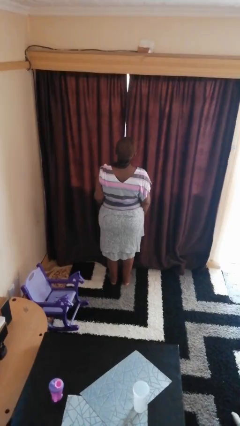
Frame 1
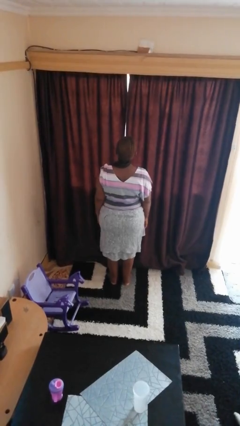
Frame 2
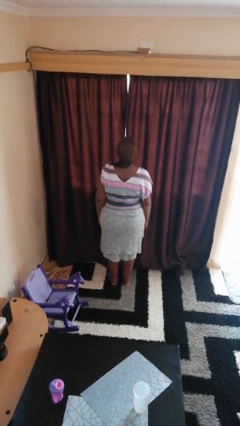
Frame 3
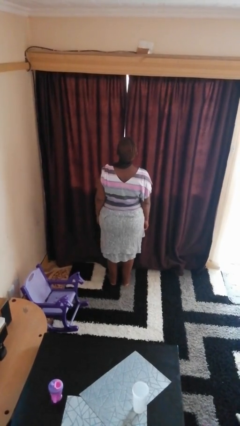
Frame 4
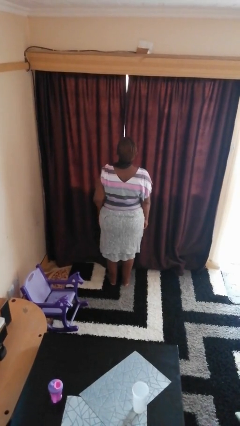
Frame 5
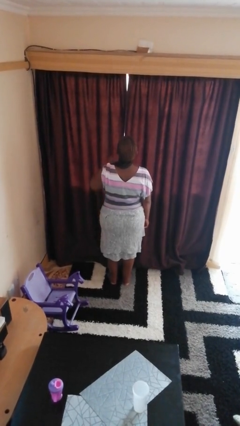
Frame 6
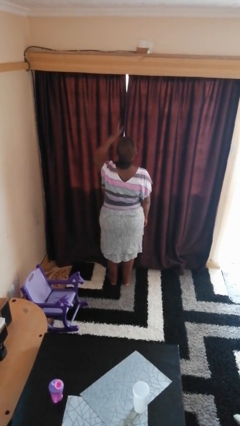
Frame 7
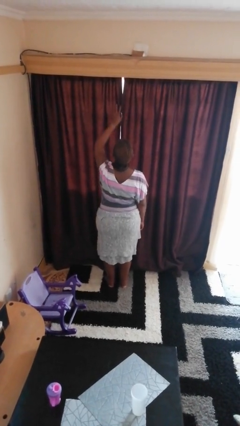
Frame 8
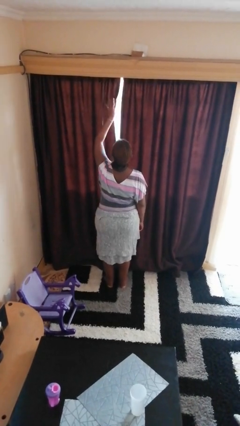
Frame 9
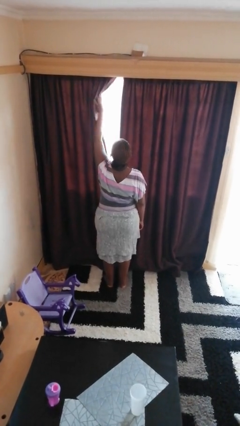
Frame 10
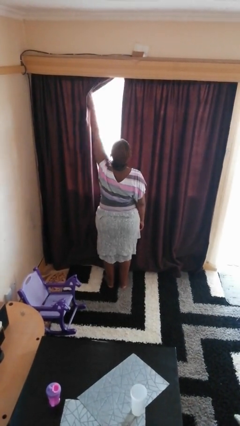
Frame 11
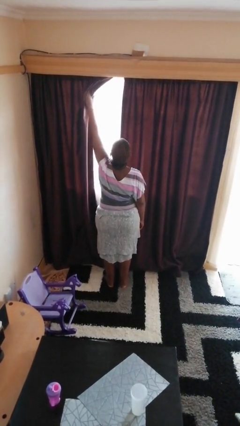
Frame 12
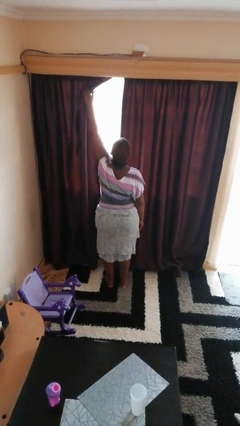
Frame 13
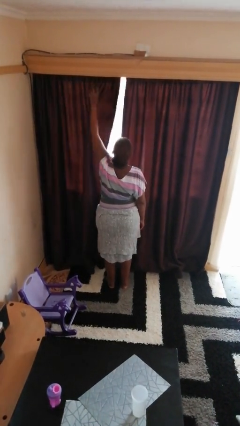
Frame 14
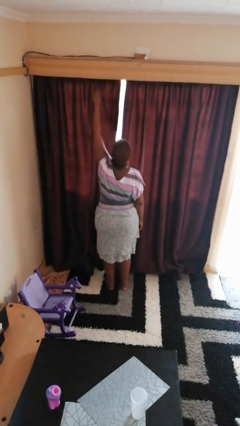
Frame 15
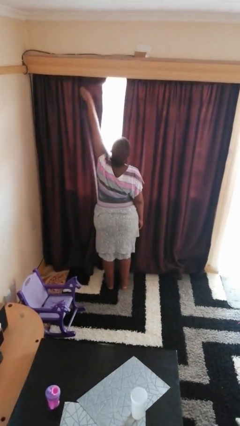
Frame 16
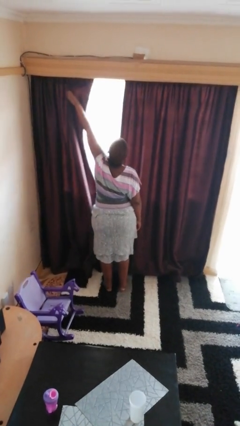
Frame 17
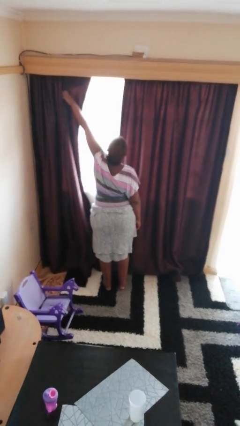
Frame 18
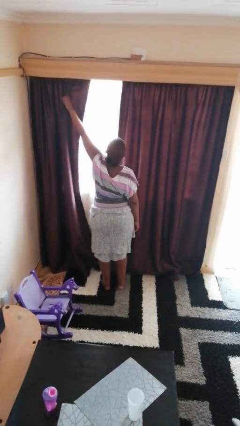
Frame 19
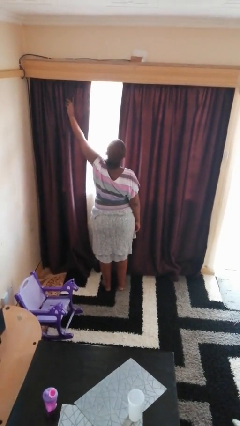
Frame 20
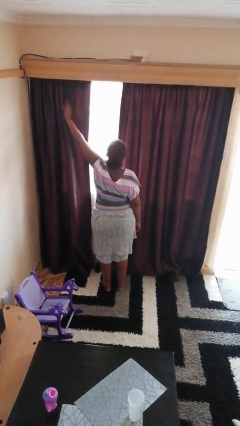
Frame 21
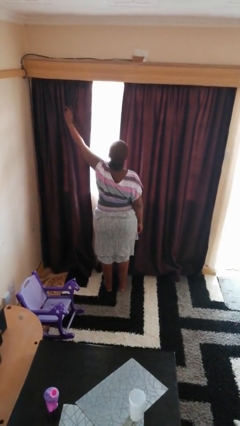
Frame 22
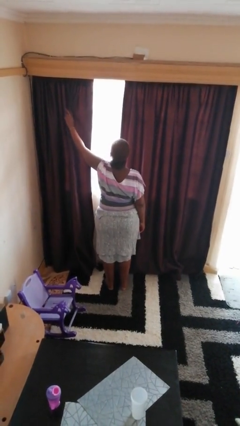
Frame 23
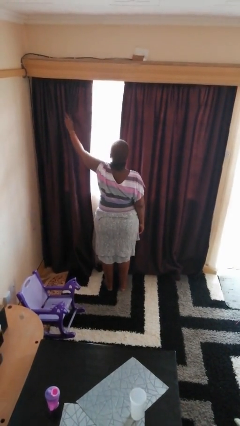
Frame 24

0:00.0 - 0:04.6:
person opens curtains

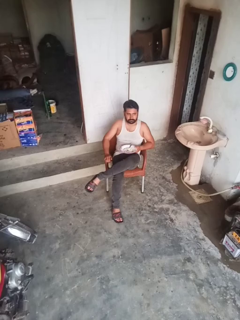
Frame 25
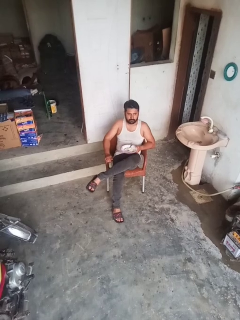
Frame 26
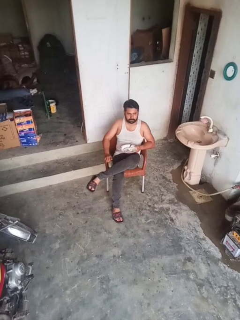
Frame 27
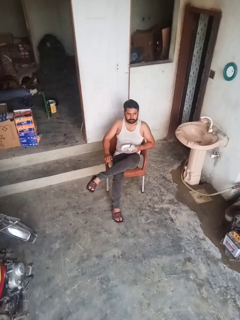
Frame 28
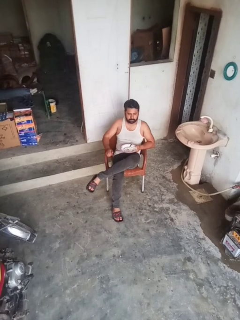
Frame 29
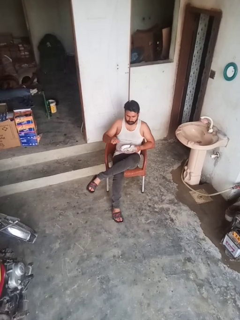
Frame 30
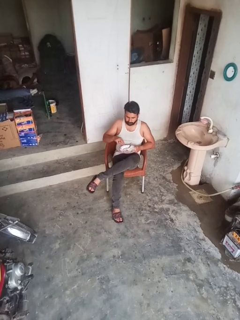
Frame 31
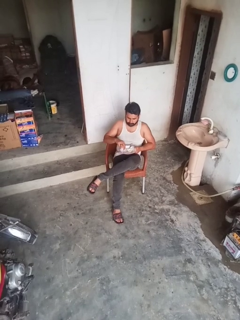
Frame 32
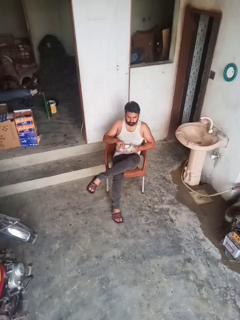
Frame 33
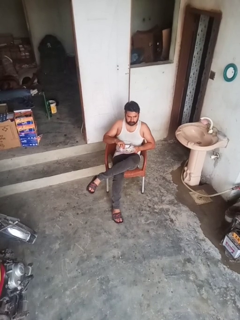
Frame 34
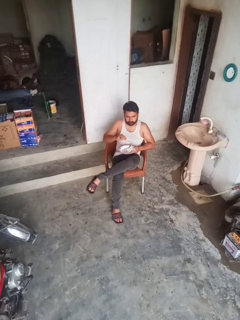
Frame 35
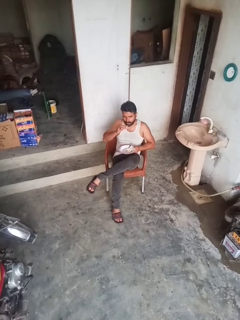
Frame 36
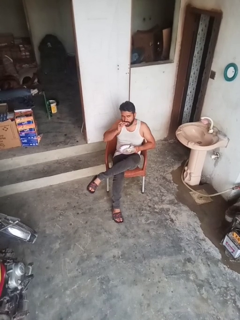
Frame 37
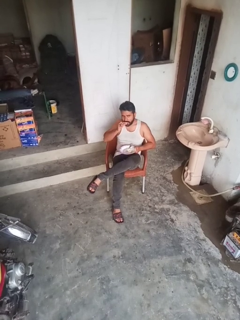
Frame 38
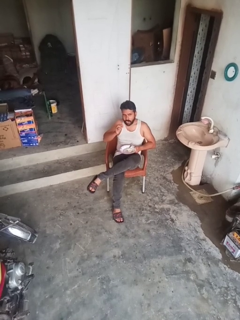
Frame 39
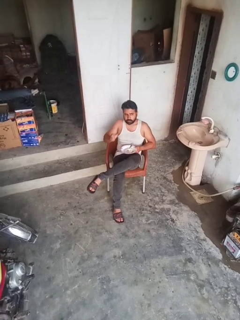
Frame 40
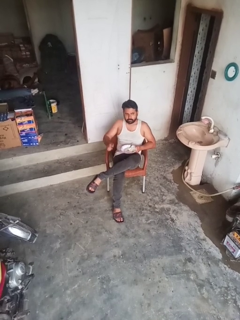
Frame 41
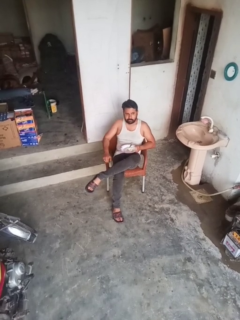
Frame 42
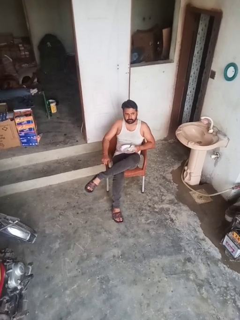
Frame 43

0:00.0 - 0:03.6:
person eats with hands

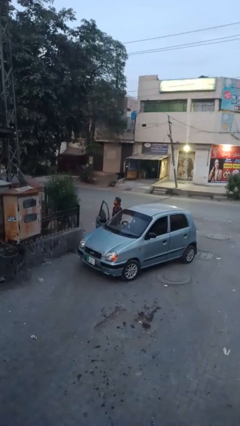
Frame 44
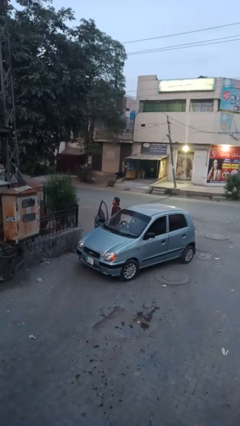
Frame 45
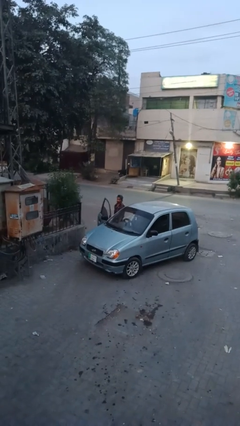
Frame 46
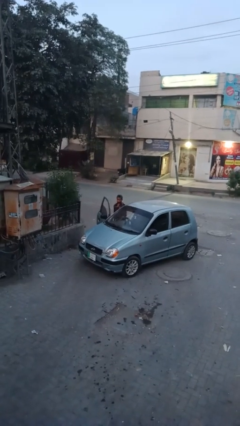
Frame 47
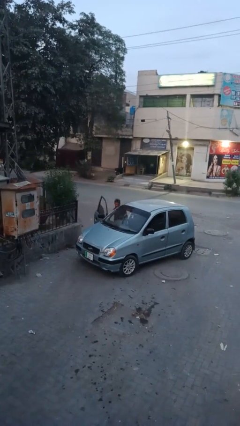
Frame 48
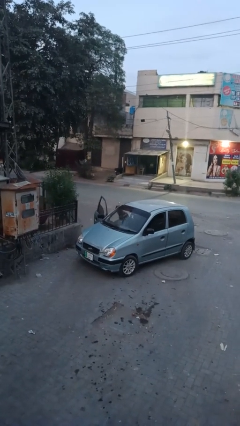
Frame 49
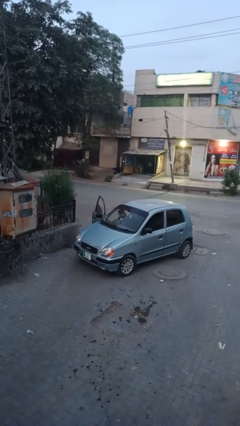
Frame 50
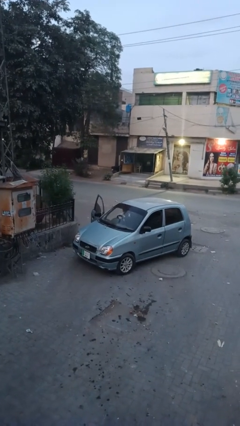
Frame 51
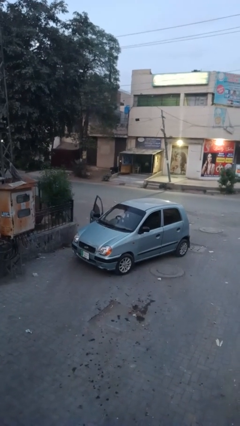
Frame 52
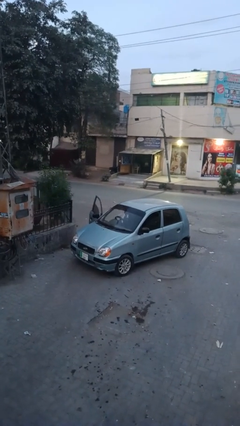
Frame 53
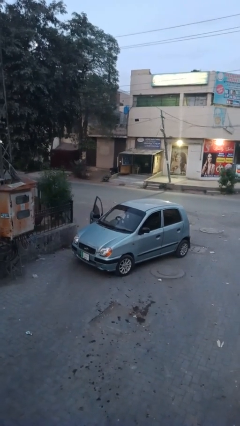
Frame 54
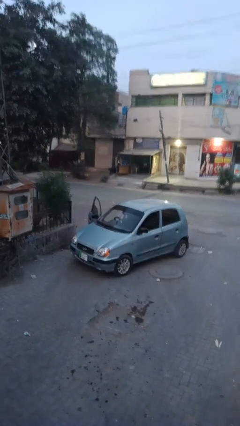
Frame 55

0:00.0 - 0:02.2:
person enters car

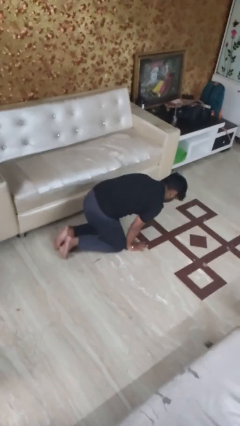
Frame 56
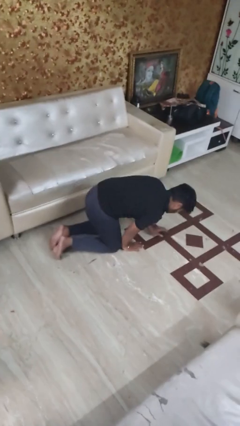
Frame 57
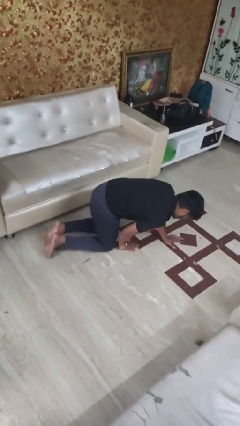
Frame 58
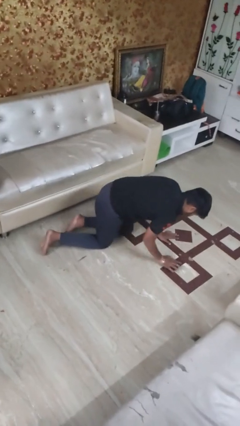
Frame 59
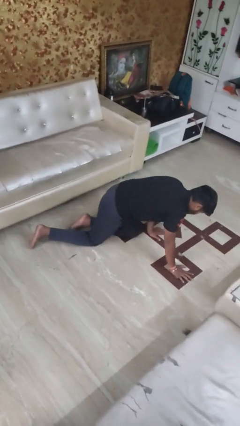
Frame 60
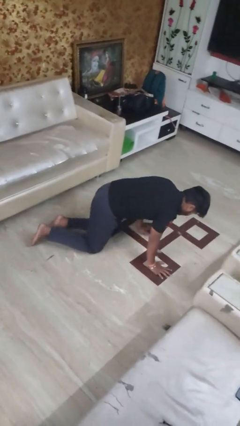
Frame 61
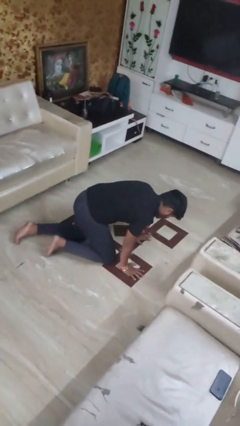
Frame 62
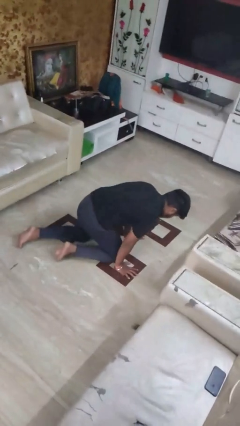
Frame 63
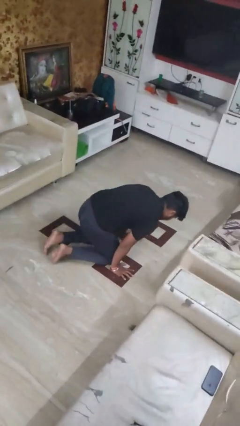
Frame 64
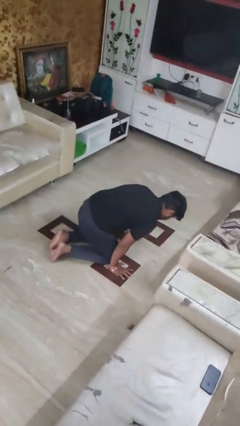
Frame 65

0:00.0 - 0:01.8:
person crawls

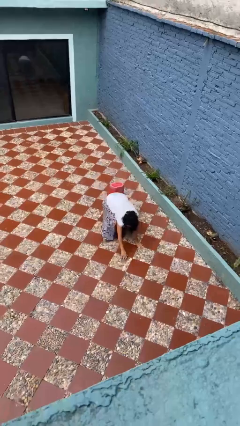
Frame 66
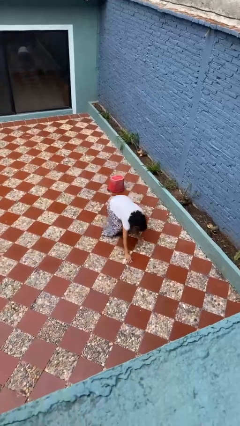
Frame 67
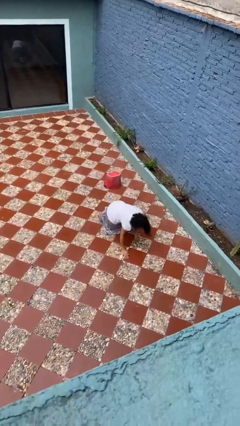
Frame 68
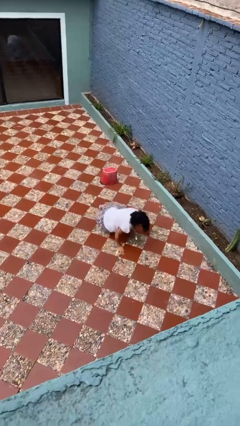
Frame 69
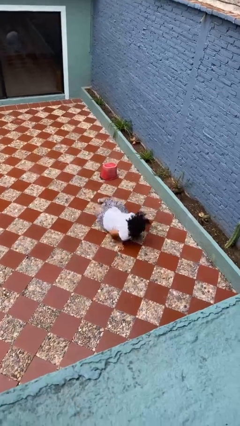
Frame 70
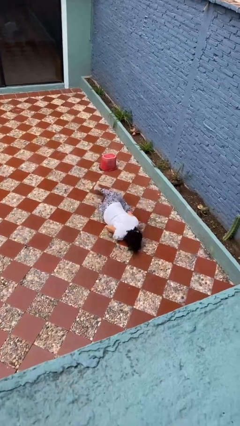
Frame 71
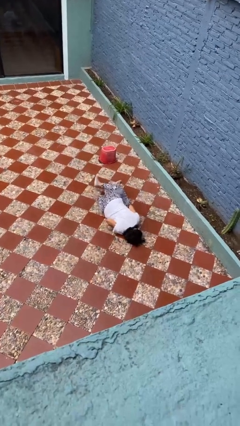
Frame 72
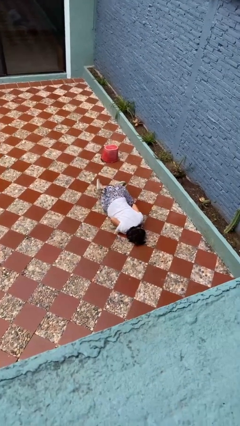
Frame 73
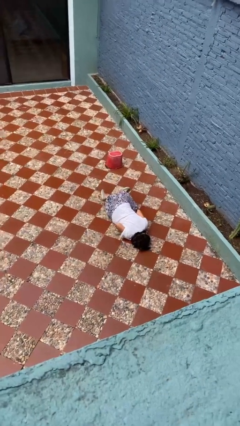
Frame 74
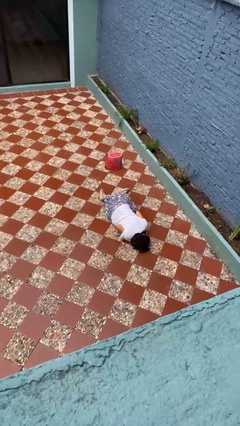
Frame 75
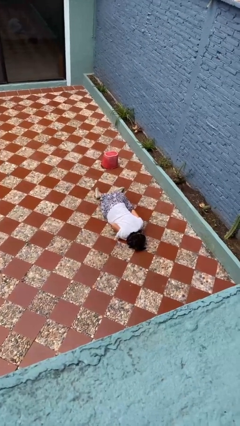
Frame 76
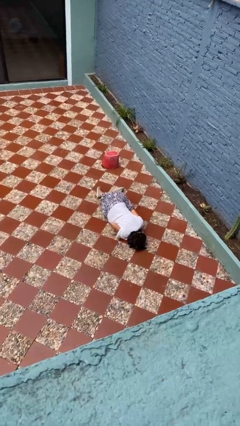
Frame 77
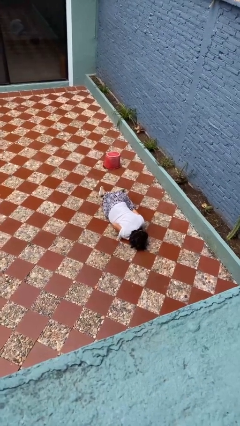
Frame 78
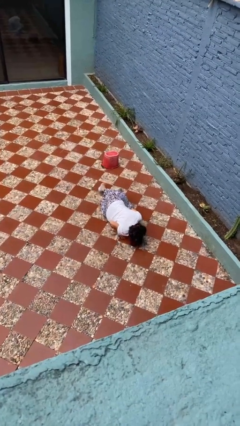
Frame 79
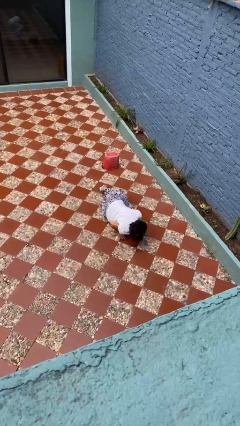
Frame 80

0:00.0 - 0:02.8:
person lies down on floor

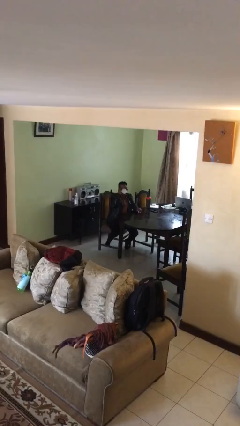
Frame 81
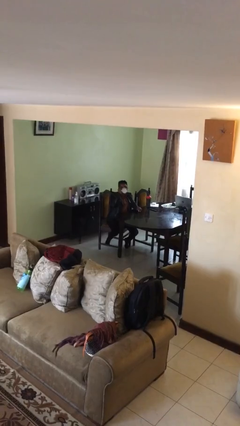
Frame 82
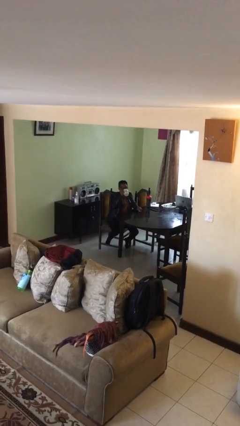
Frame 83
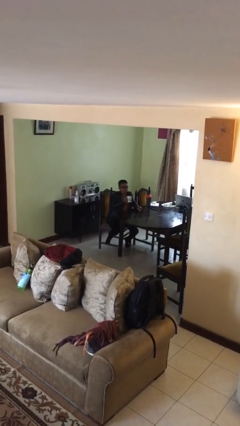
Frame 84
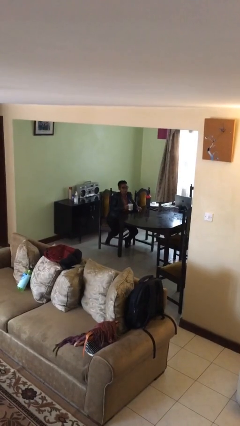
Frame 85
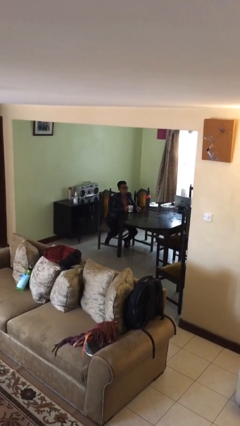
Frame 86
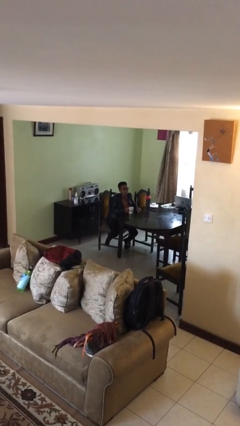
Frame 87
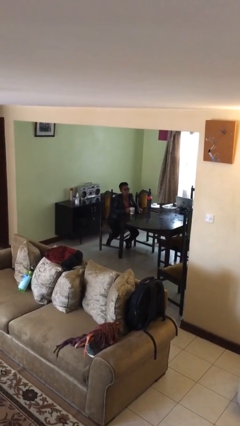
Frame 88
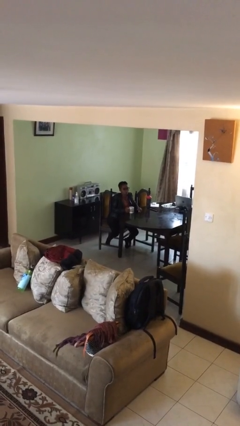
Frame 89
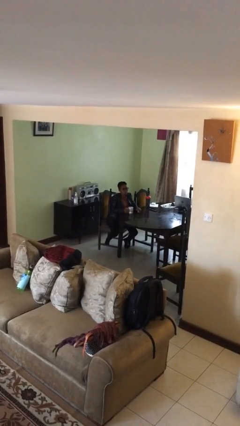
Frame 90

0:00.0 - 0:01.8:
person puts down object on table

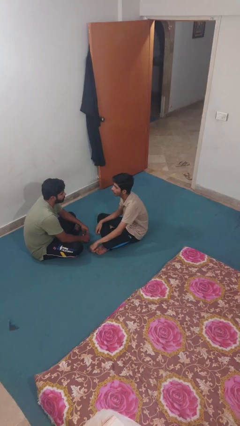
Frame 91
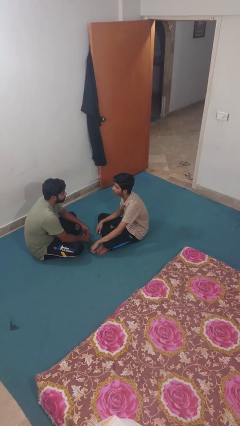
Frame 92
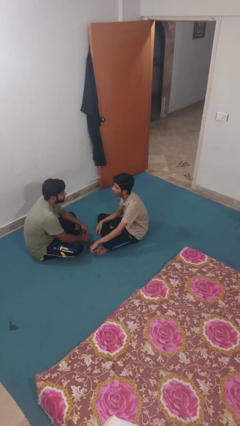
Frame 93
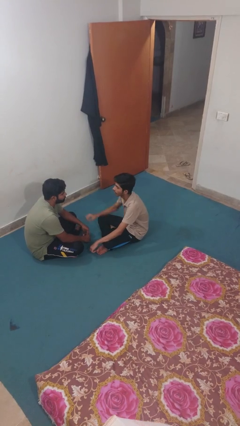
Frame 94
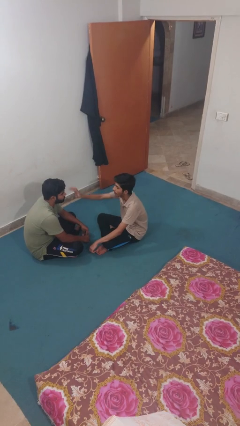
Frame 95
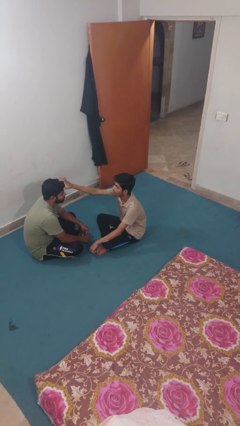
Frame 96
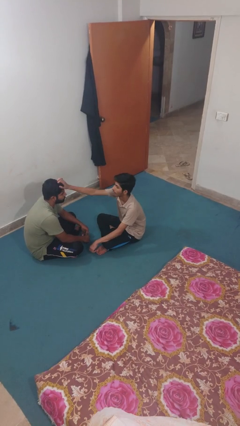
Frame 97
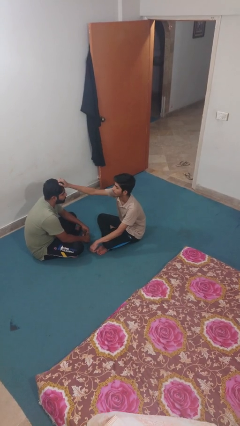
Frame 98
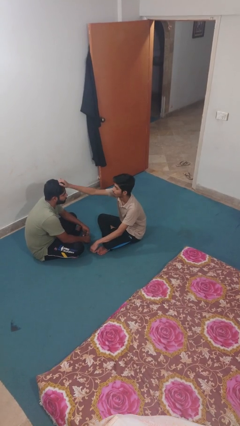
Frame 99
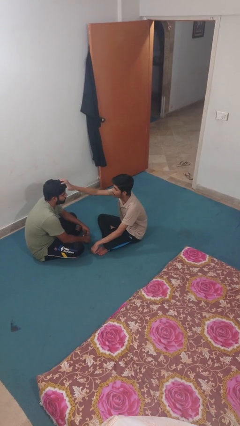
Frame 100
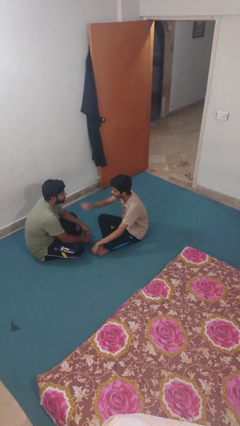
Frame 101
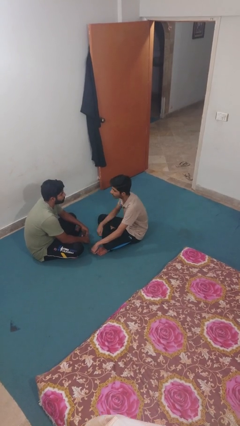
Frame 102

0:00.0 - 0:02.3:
person grabs person by hair
